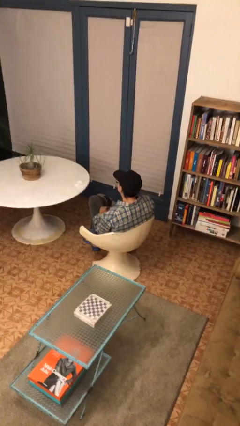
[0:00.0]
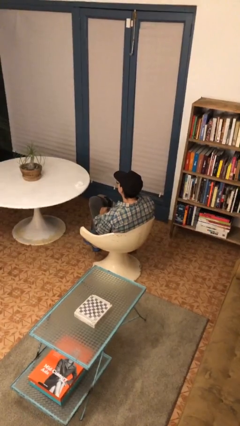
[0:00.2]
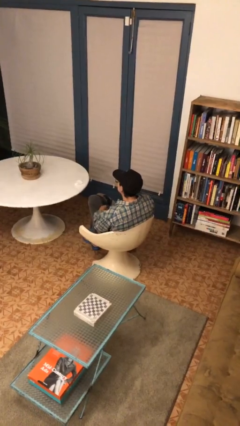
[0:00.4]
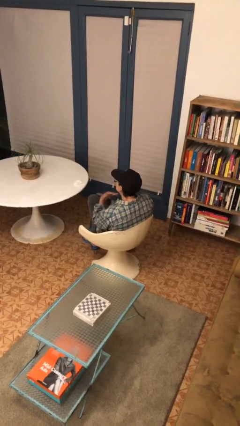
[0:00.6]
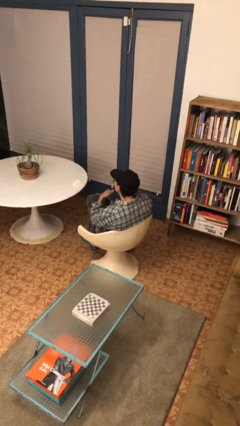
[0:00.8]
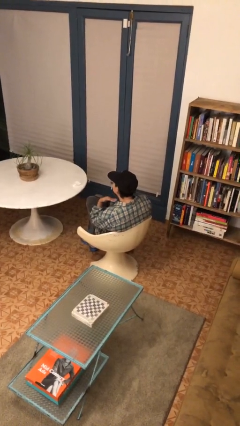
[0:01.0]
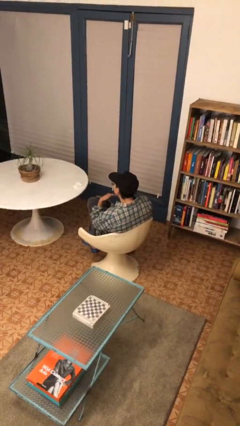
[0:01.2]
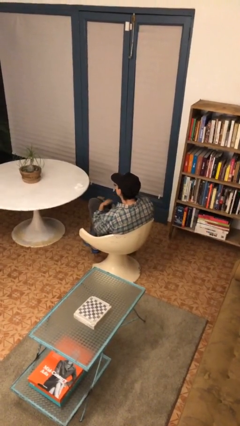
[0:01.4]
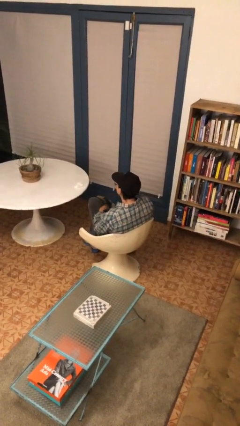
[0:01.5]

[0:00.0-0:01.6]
person gestures cut

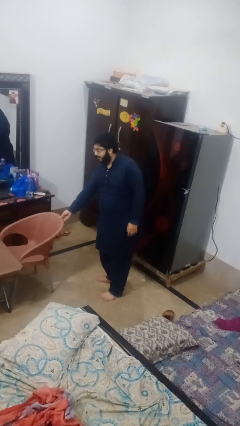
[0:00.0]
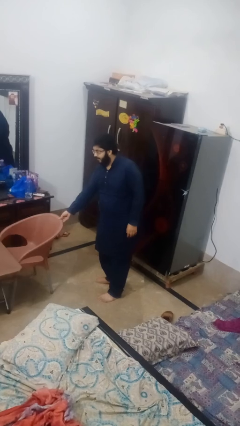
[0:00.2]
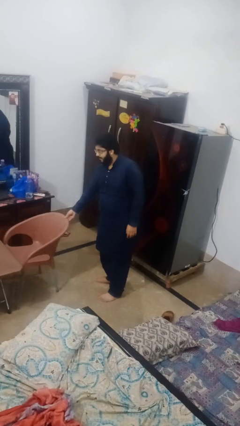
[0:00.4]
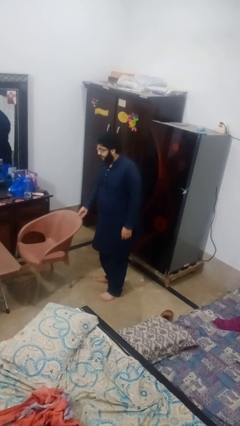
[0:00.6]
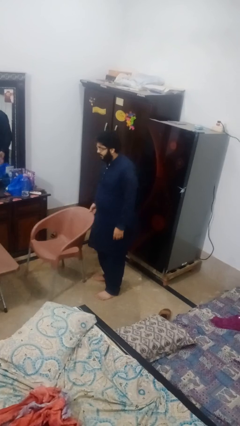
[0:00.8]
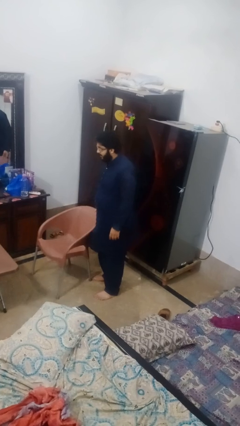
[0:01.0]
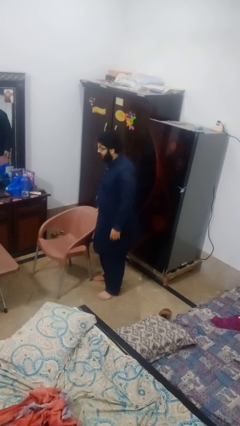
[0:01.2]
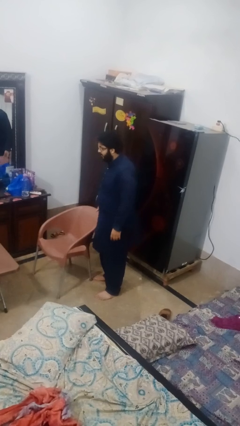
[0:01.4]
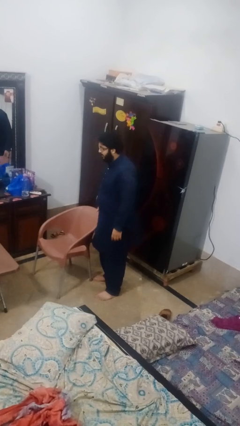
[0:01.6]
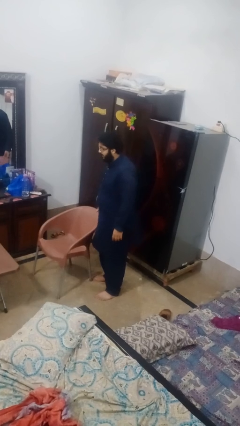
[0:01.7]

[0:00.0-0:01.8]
person pulls out chair

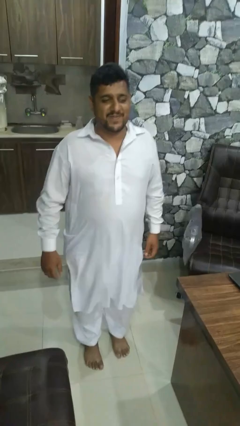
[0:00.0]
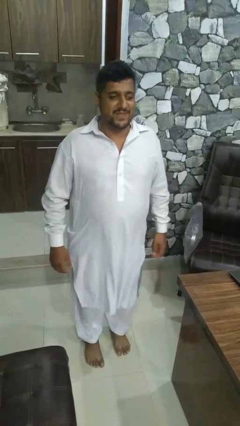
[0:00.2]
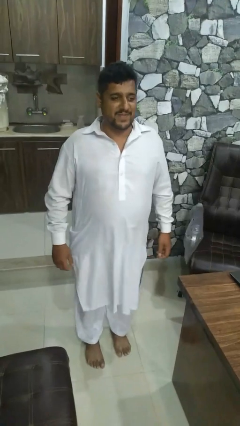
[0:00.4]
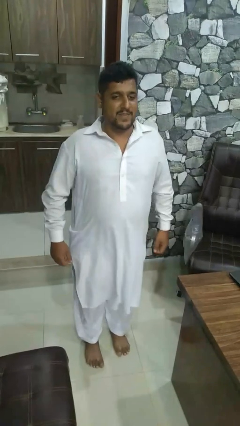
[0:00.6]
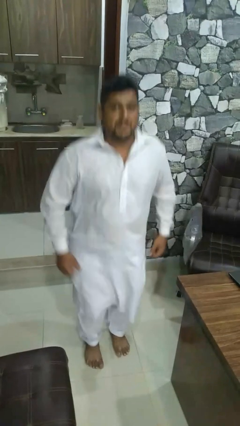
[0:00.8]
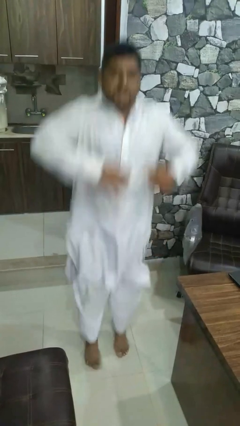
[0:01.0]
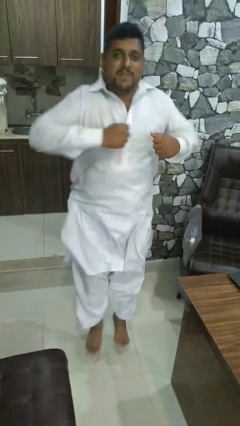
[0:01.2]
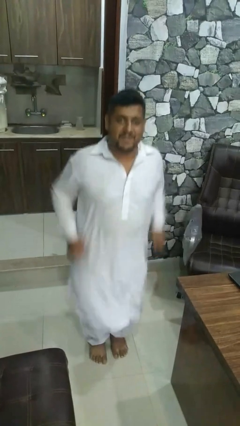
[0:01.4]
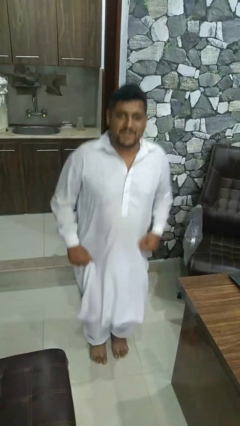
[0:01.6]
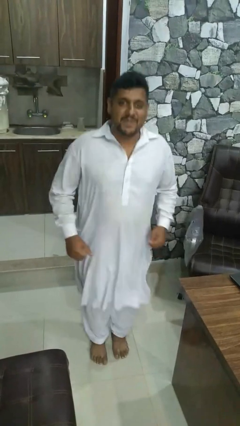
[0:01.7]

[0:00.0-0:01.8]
person jumps

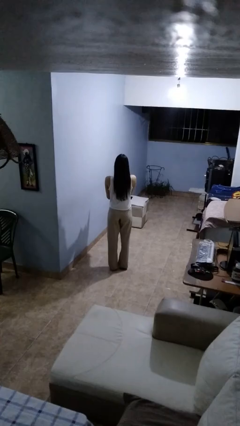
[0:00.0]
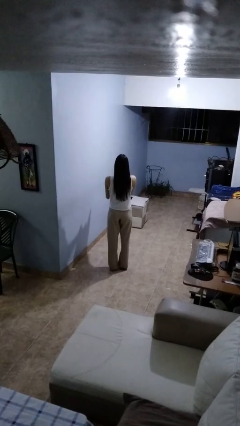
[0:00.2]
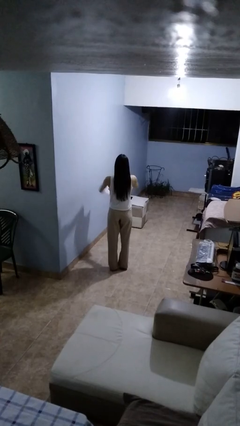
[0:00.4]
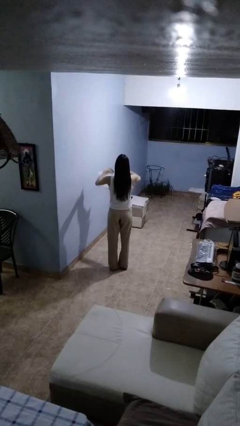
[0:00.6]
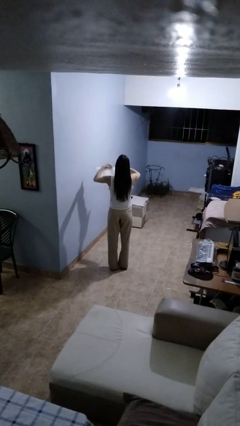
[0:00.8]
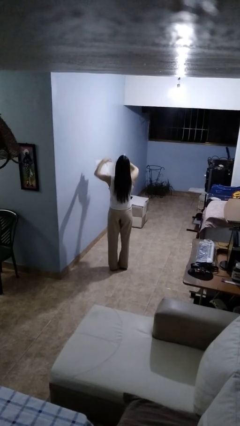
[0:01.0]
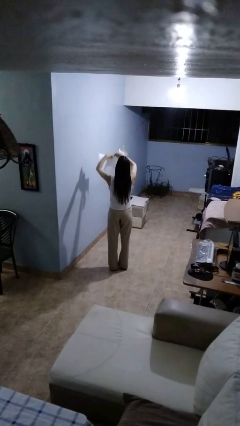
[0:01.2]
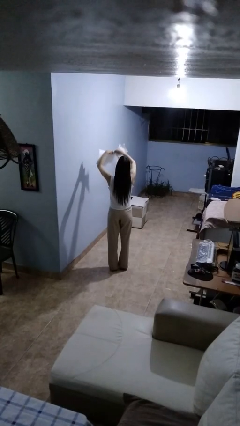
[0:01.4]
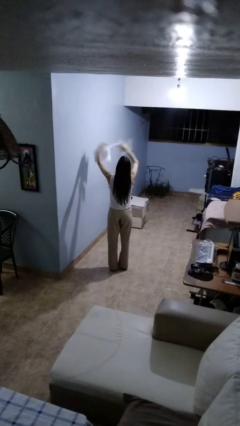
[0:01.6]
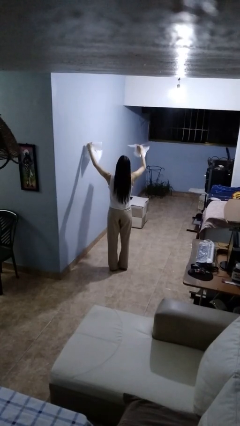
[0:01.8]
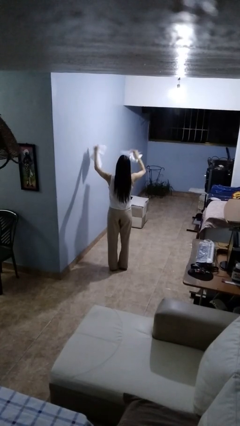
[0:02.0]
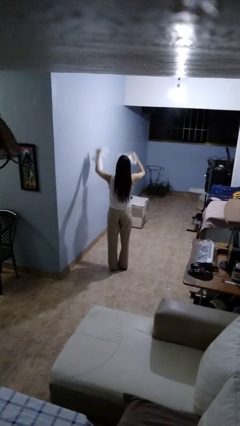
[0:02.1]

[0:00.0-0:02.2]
person tears paper

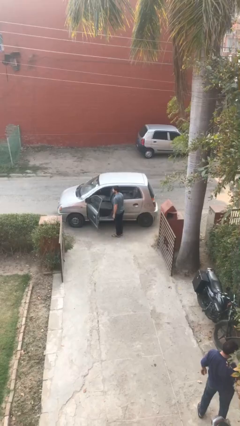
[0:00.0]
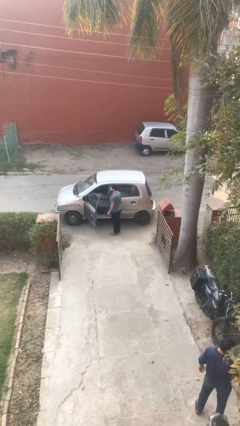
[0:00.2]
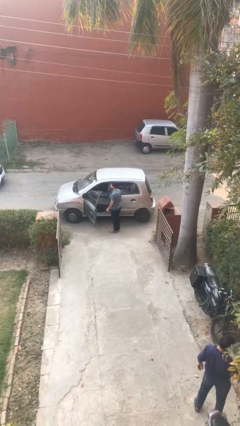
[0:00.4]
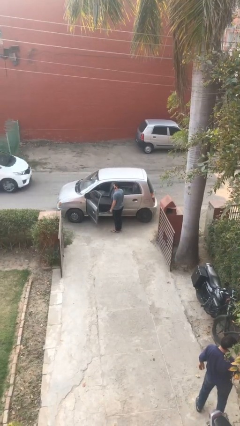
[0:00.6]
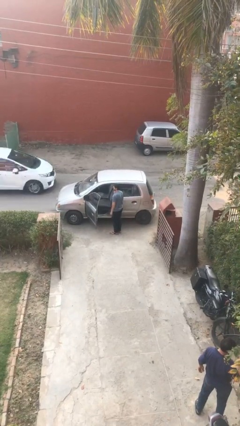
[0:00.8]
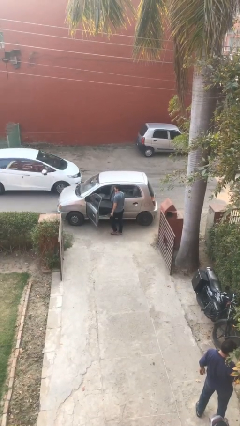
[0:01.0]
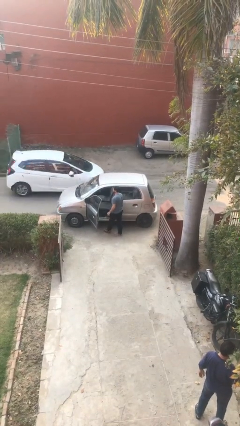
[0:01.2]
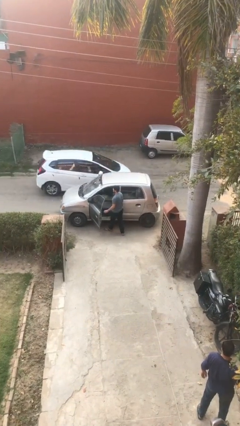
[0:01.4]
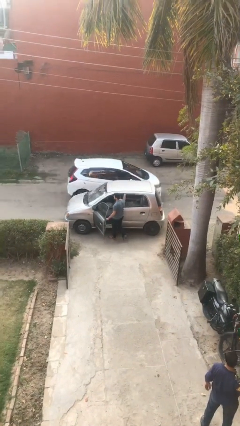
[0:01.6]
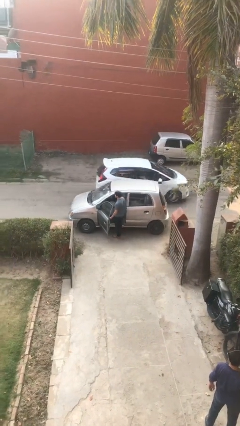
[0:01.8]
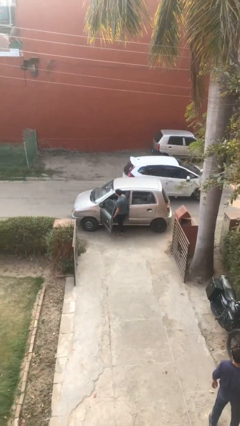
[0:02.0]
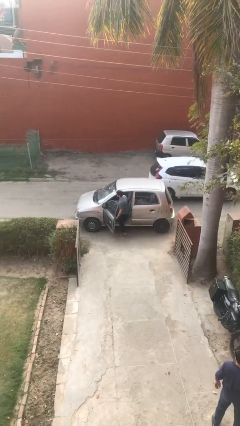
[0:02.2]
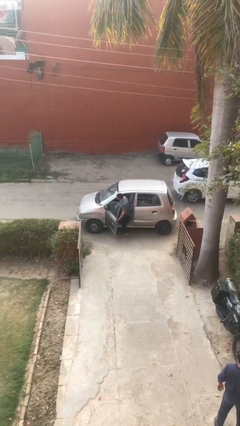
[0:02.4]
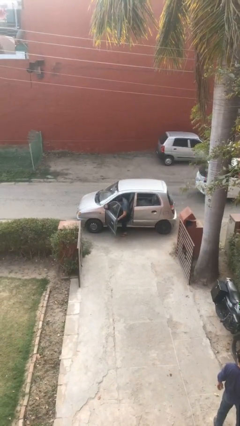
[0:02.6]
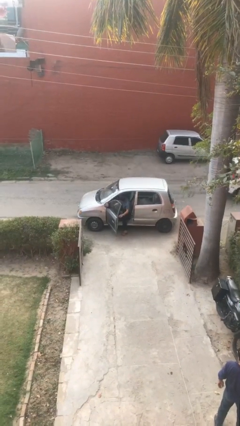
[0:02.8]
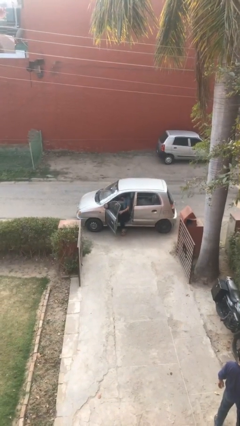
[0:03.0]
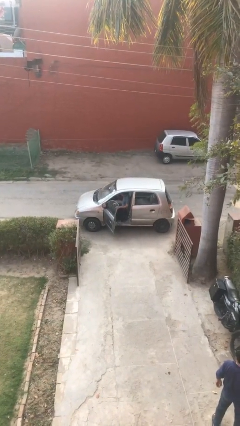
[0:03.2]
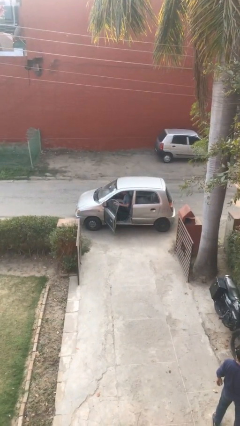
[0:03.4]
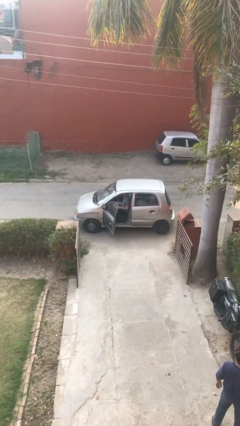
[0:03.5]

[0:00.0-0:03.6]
person enters car

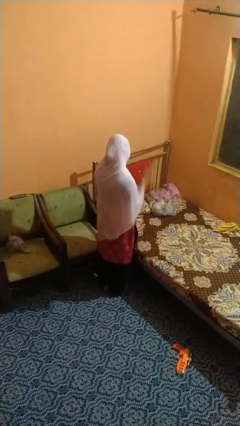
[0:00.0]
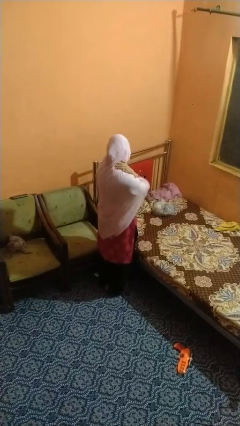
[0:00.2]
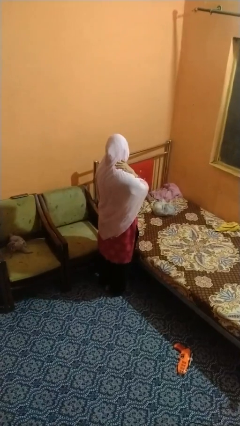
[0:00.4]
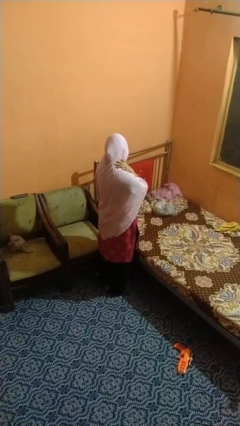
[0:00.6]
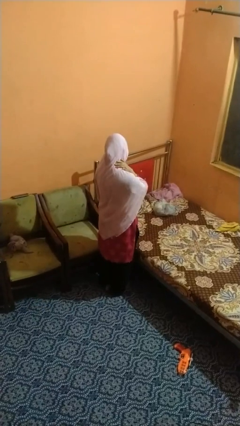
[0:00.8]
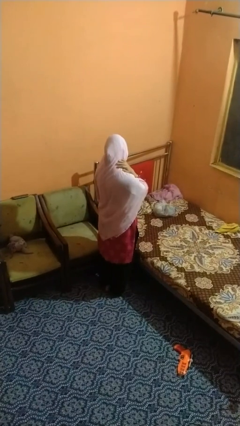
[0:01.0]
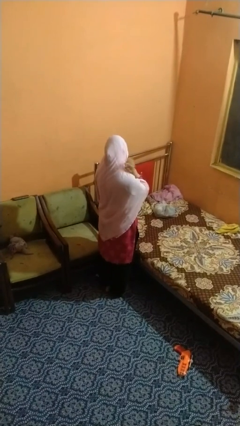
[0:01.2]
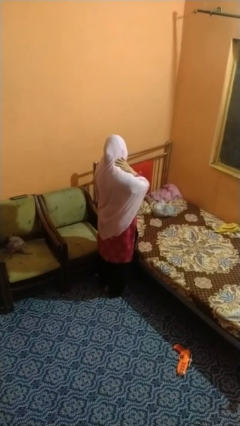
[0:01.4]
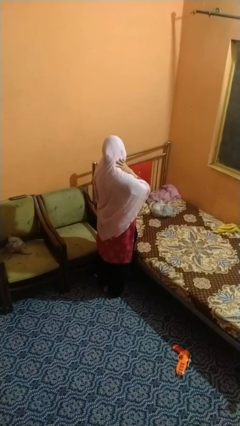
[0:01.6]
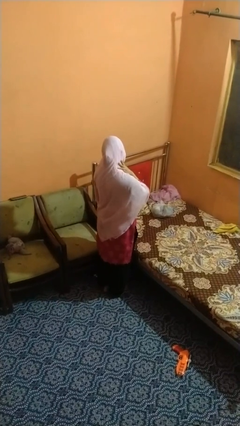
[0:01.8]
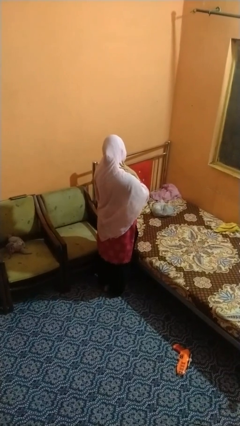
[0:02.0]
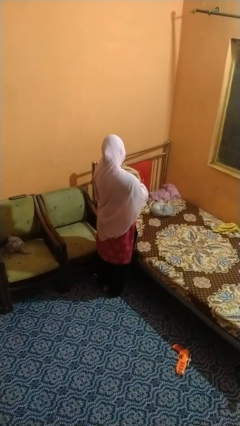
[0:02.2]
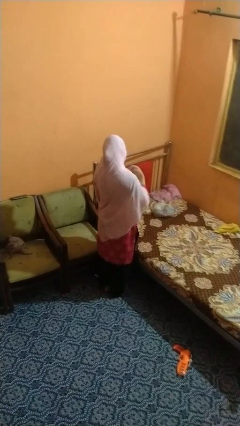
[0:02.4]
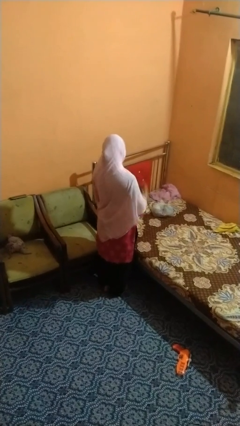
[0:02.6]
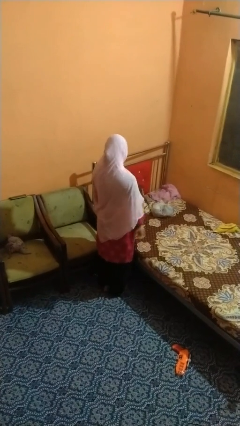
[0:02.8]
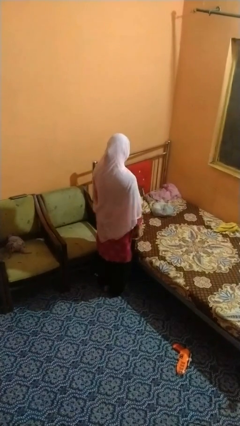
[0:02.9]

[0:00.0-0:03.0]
person swats bug

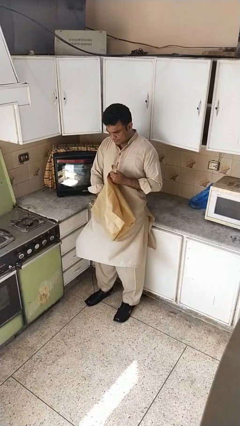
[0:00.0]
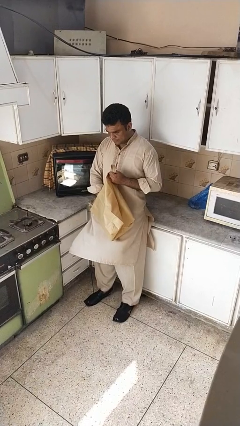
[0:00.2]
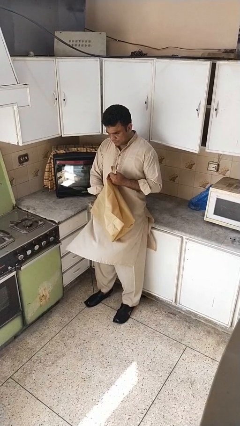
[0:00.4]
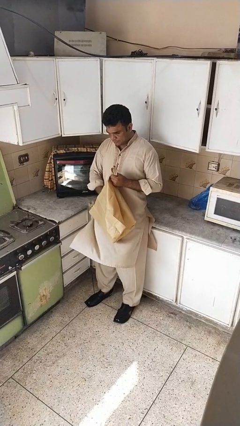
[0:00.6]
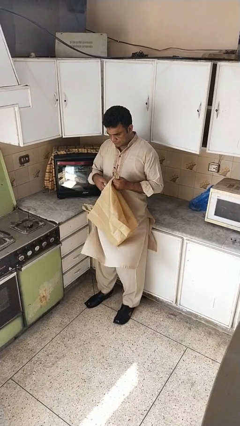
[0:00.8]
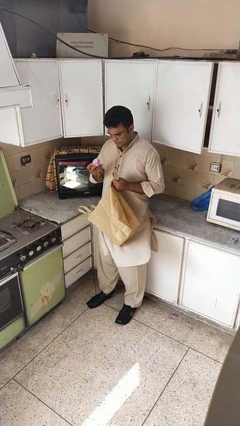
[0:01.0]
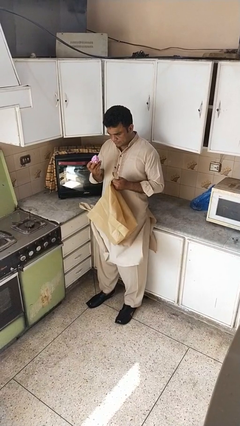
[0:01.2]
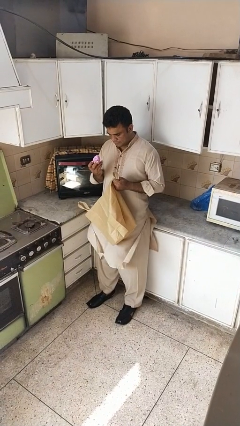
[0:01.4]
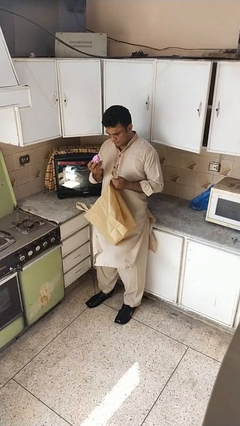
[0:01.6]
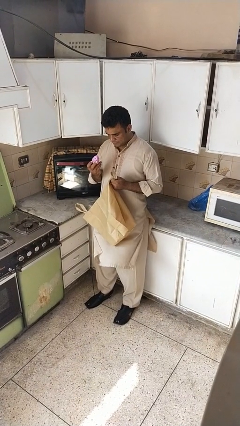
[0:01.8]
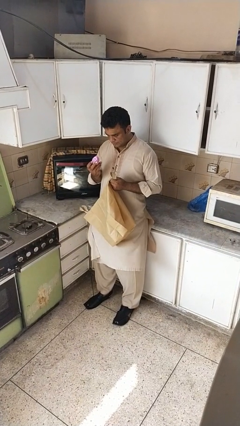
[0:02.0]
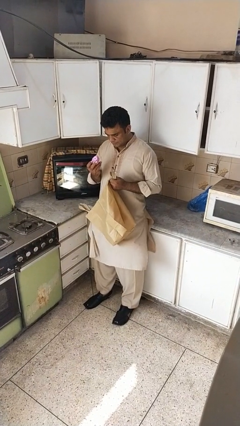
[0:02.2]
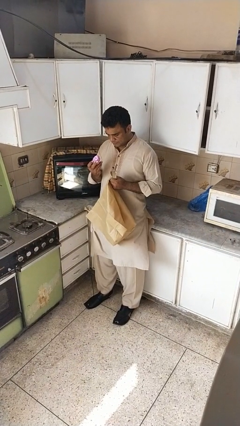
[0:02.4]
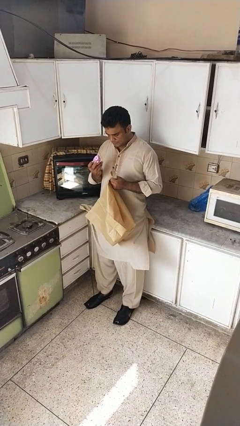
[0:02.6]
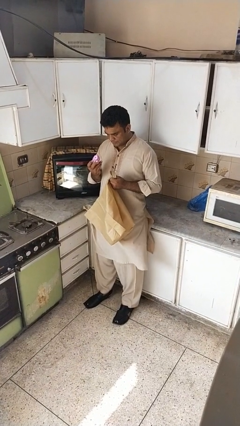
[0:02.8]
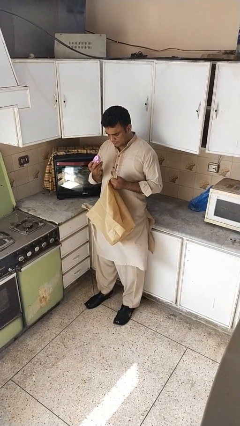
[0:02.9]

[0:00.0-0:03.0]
person takes object from bag
